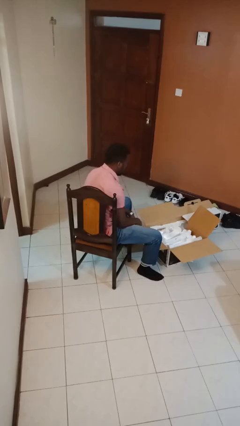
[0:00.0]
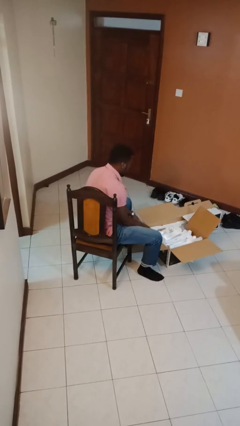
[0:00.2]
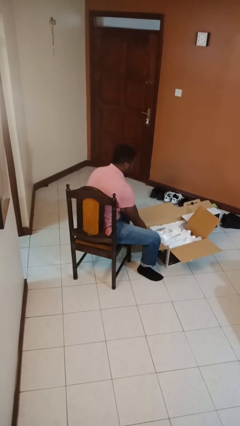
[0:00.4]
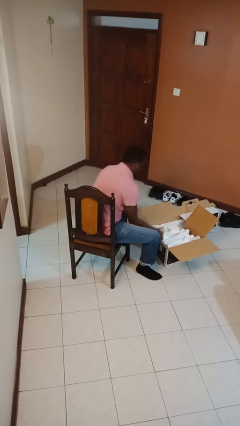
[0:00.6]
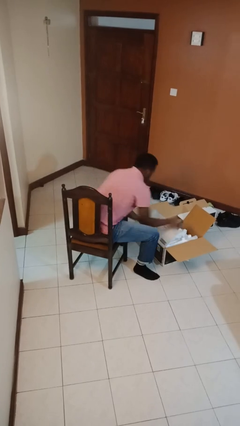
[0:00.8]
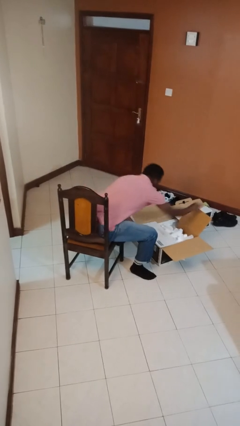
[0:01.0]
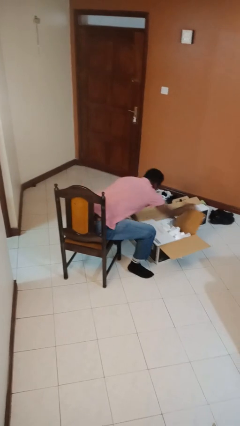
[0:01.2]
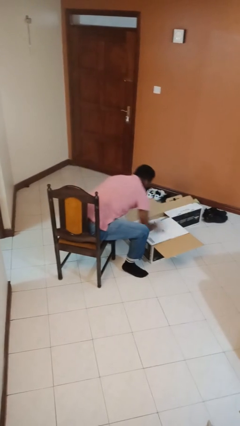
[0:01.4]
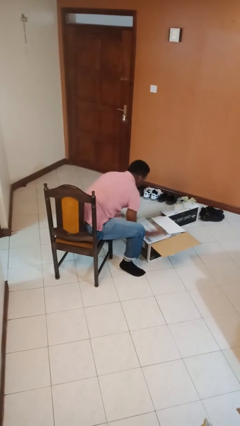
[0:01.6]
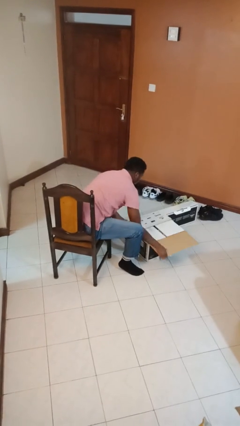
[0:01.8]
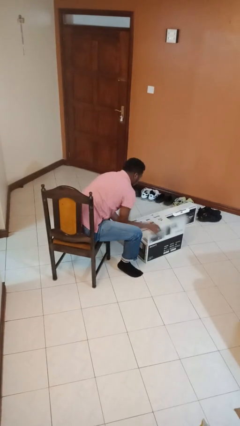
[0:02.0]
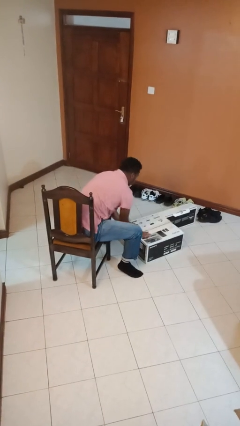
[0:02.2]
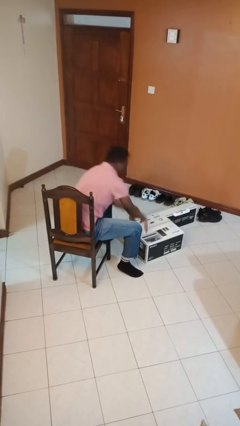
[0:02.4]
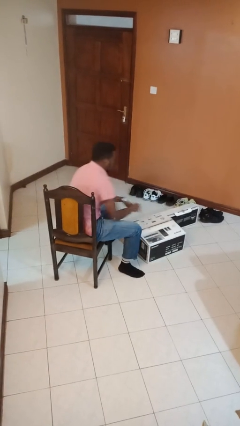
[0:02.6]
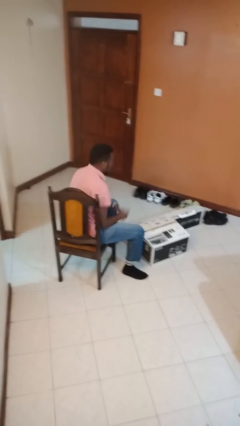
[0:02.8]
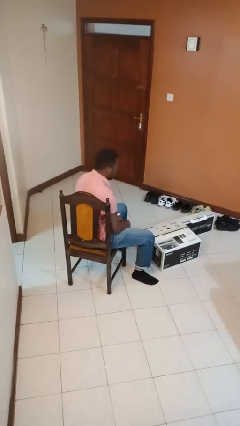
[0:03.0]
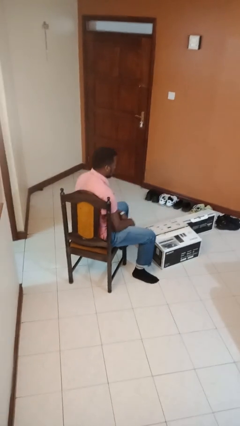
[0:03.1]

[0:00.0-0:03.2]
person closes box

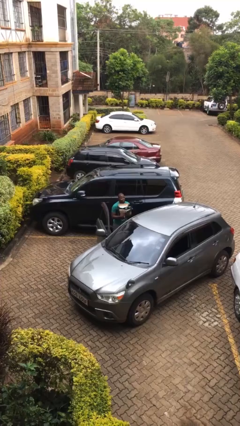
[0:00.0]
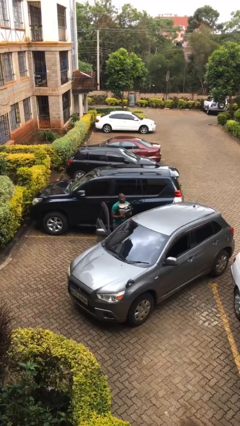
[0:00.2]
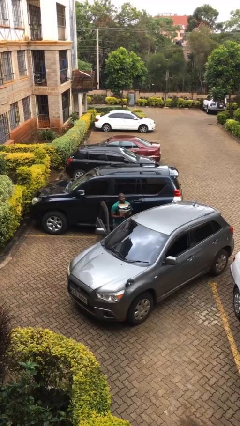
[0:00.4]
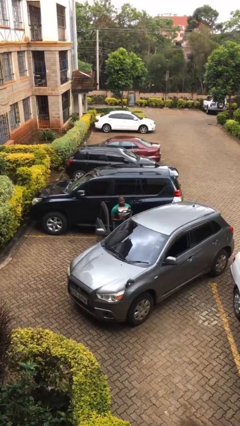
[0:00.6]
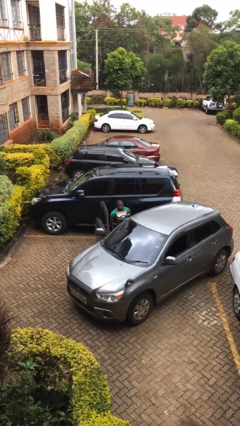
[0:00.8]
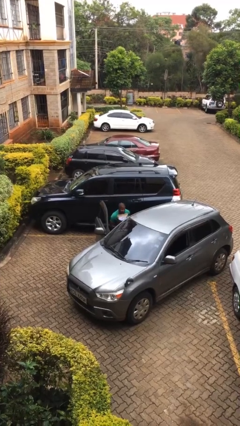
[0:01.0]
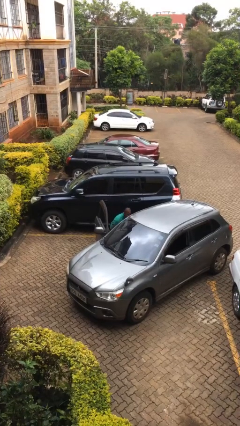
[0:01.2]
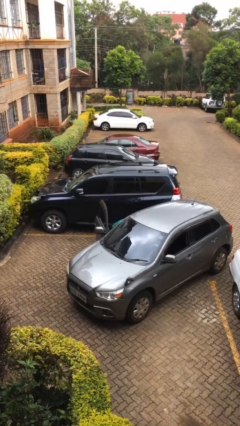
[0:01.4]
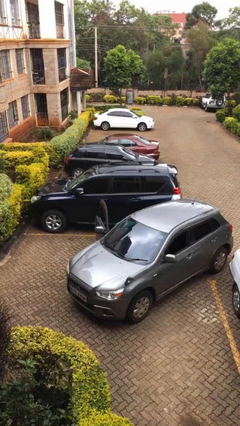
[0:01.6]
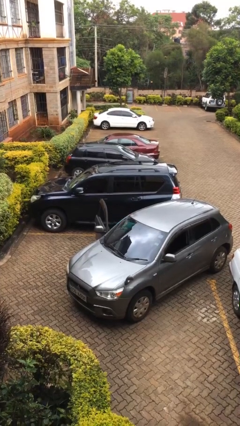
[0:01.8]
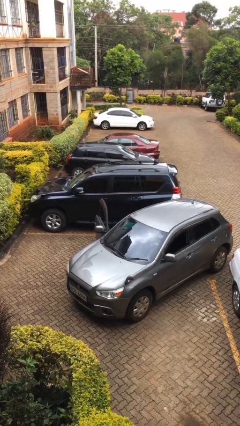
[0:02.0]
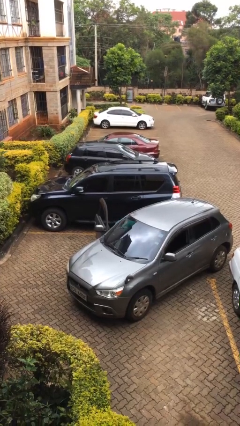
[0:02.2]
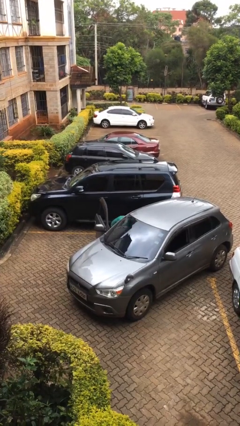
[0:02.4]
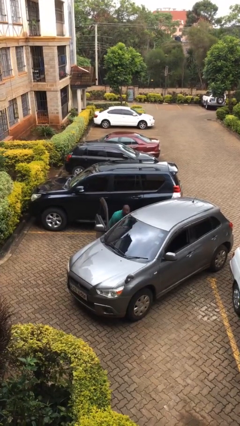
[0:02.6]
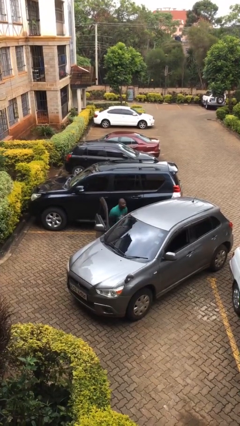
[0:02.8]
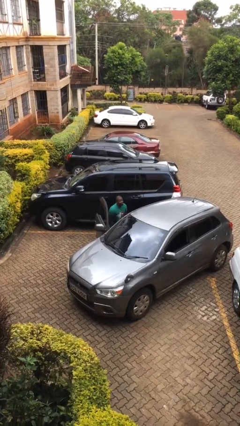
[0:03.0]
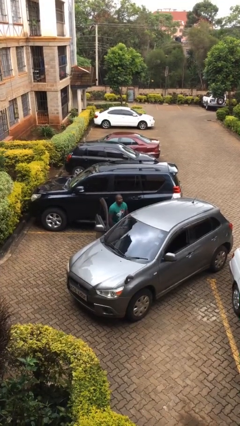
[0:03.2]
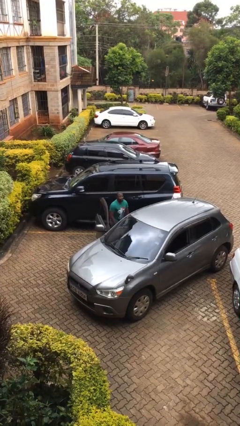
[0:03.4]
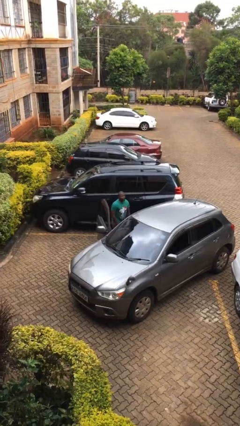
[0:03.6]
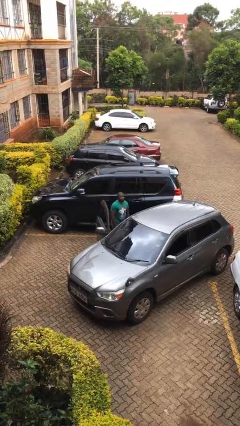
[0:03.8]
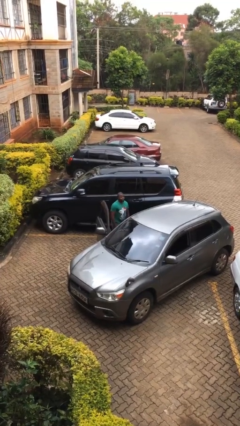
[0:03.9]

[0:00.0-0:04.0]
person loads car

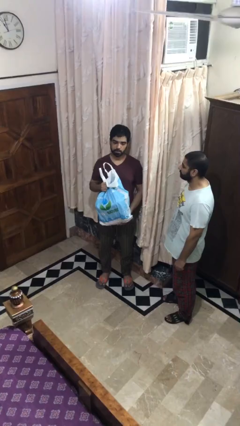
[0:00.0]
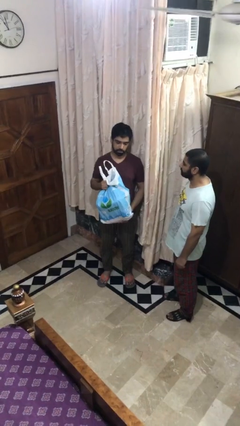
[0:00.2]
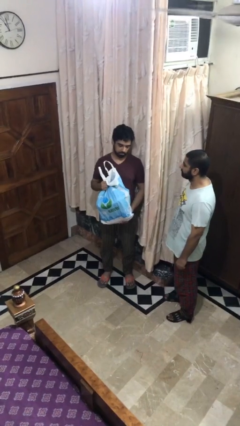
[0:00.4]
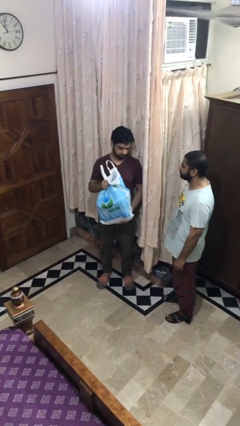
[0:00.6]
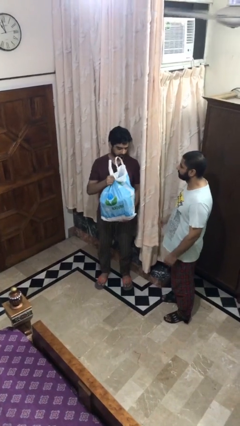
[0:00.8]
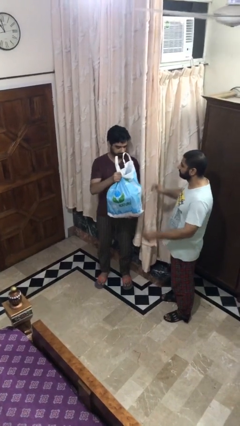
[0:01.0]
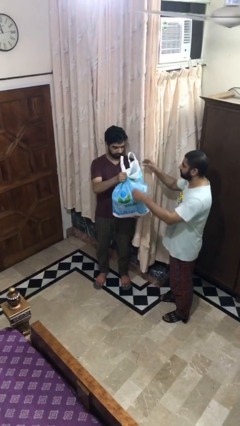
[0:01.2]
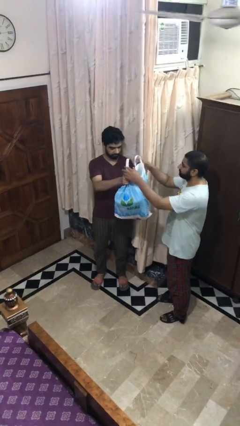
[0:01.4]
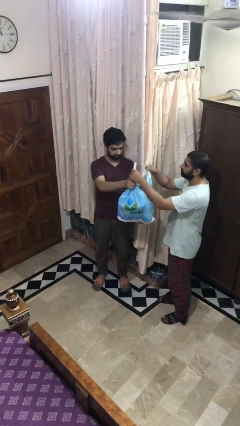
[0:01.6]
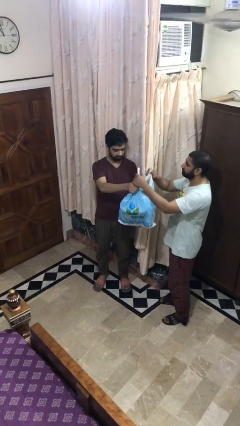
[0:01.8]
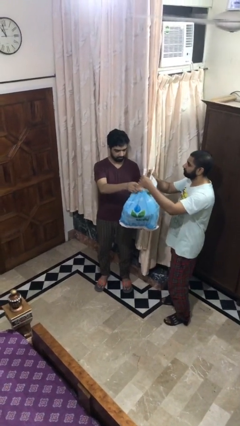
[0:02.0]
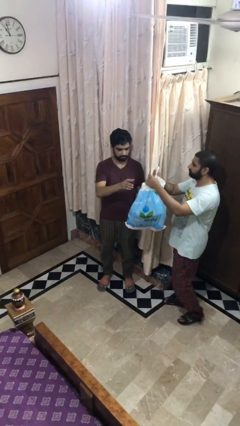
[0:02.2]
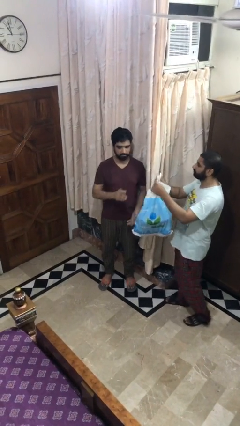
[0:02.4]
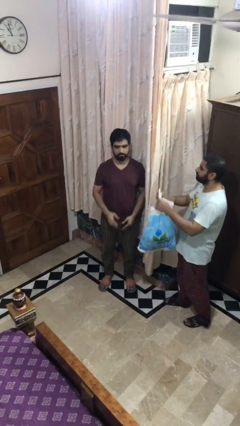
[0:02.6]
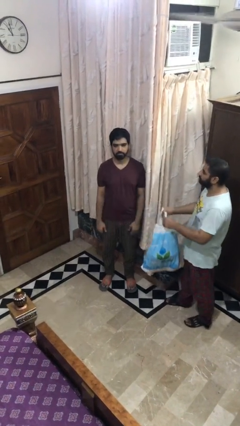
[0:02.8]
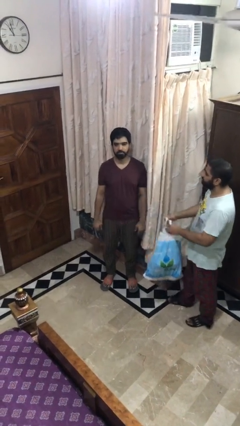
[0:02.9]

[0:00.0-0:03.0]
person transfers object to person

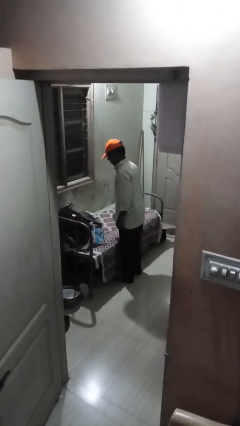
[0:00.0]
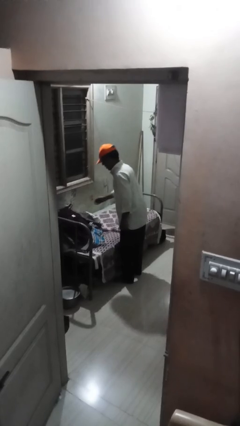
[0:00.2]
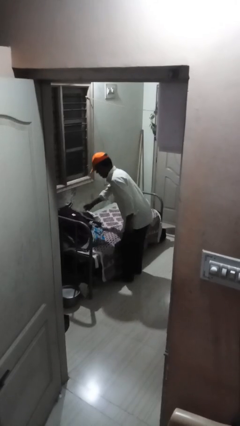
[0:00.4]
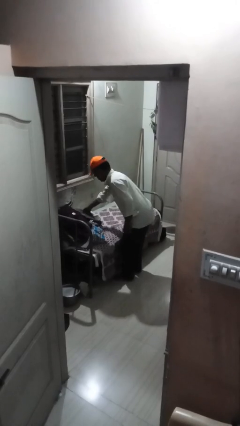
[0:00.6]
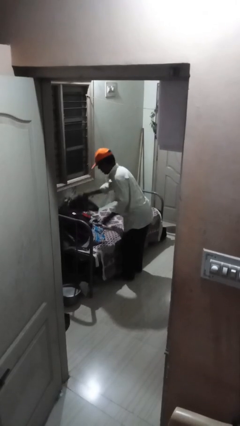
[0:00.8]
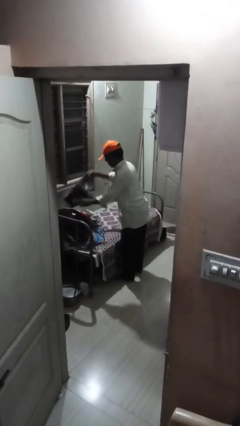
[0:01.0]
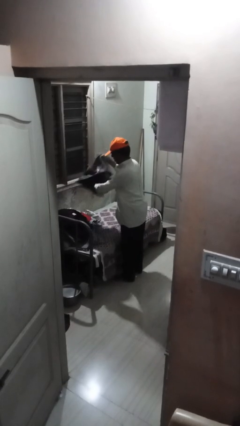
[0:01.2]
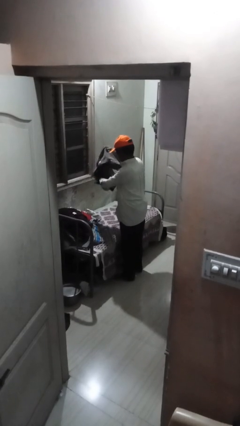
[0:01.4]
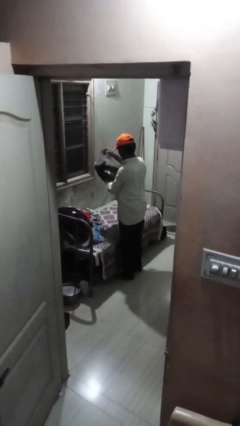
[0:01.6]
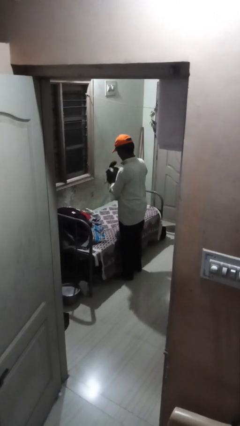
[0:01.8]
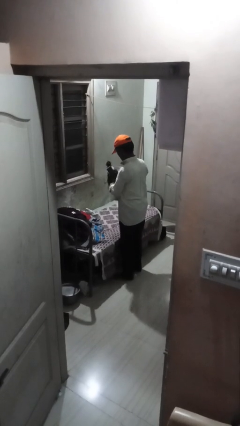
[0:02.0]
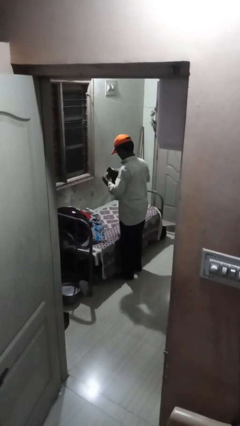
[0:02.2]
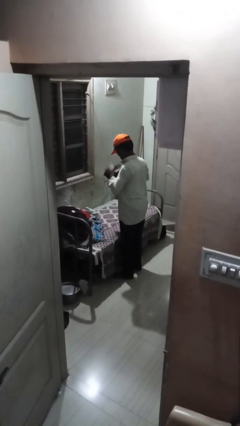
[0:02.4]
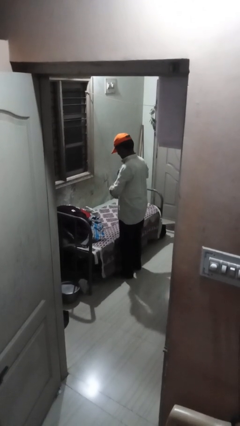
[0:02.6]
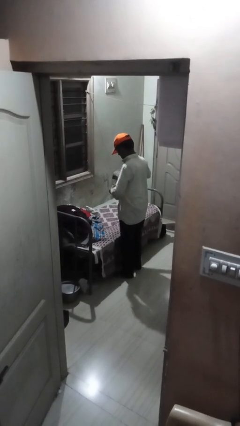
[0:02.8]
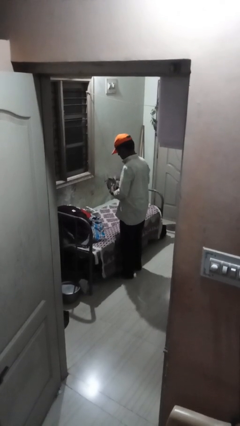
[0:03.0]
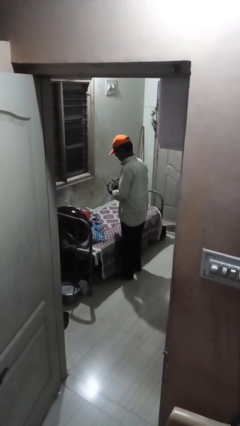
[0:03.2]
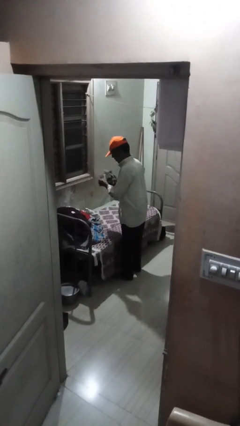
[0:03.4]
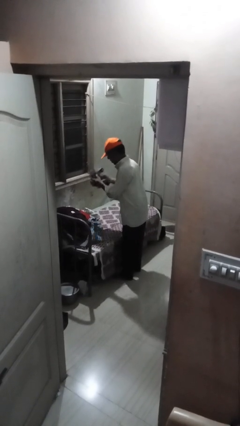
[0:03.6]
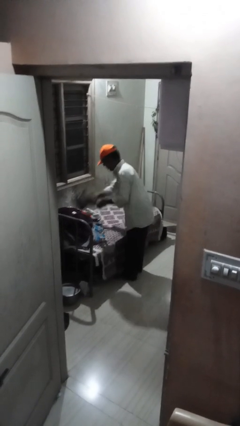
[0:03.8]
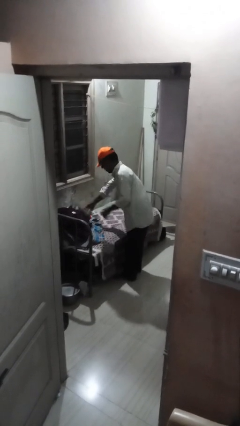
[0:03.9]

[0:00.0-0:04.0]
person folds pants

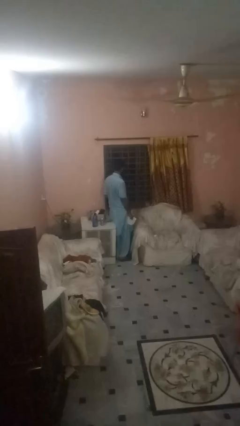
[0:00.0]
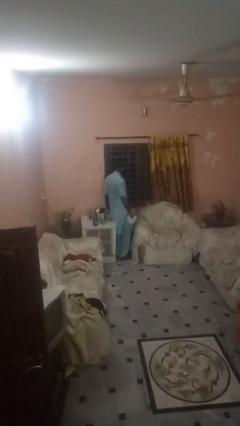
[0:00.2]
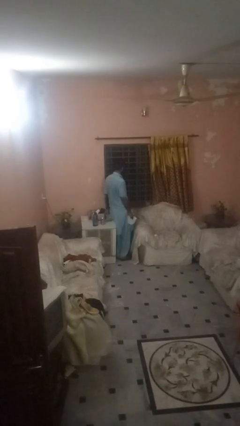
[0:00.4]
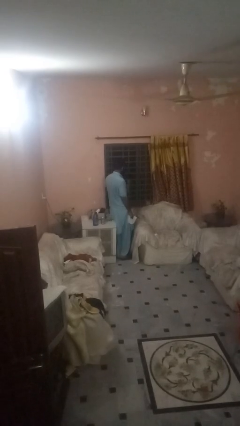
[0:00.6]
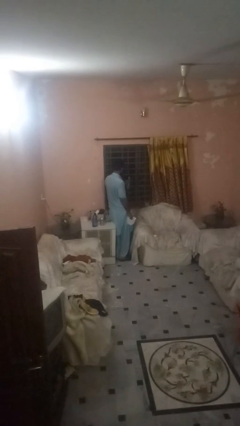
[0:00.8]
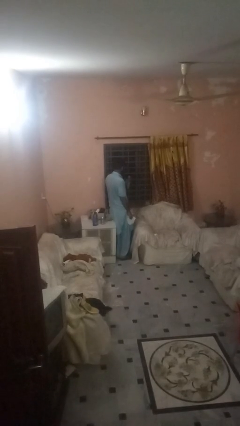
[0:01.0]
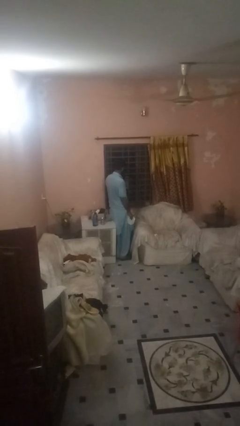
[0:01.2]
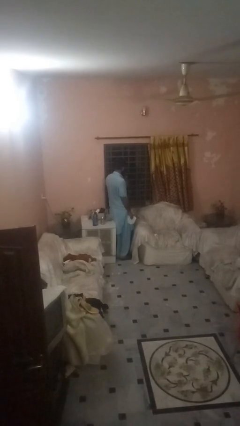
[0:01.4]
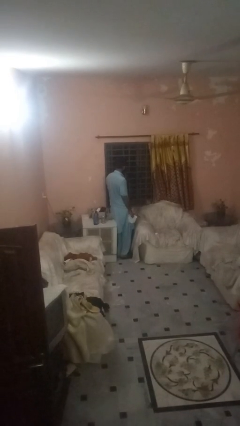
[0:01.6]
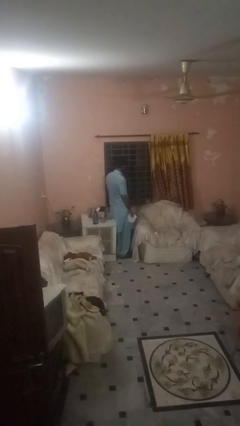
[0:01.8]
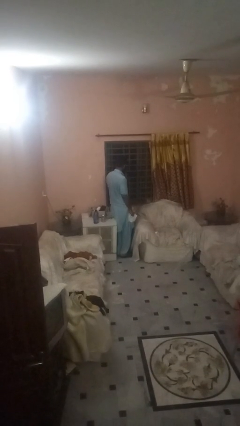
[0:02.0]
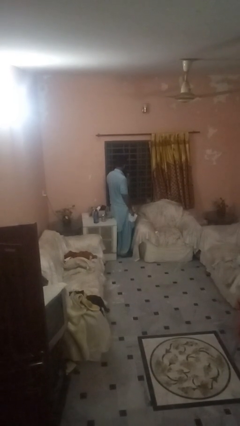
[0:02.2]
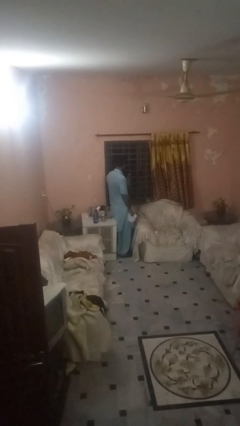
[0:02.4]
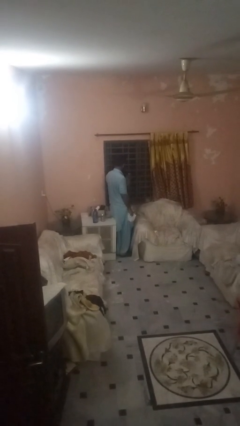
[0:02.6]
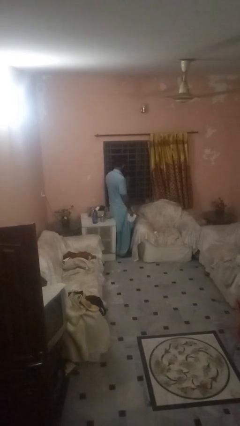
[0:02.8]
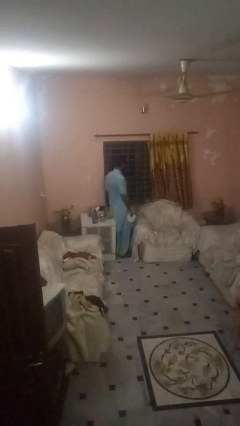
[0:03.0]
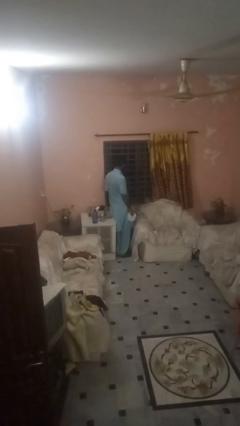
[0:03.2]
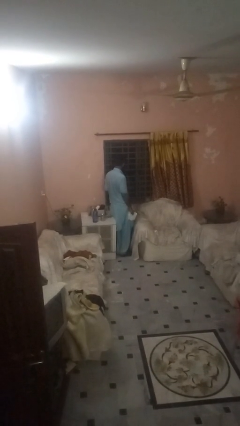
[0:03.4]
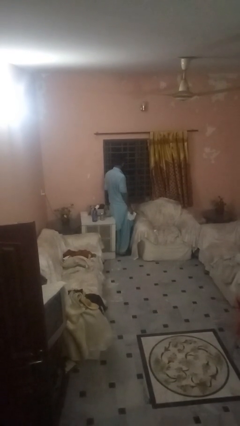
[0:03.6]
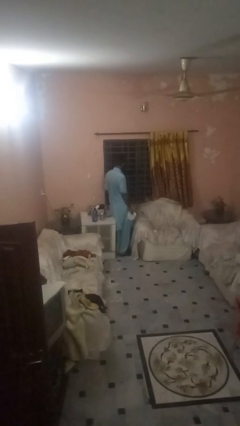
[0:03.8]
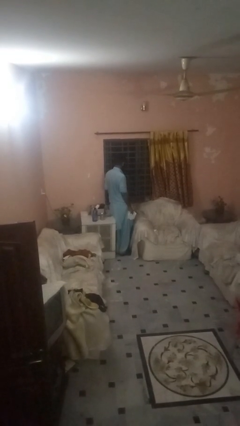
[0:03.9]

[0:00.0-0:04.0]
person sprays from bottle
